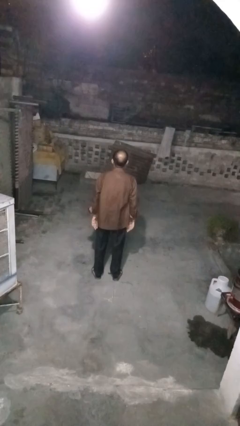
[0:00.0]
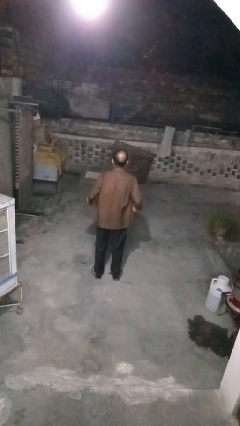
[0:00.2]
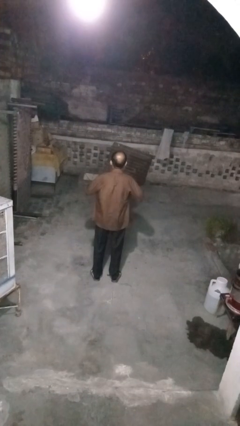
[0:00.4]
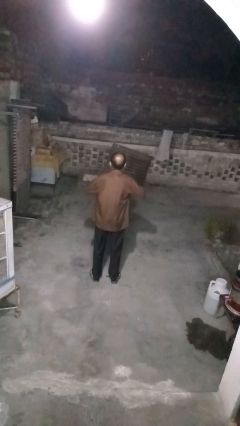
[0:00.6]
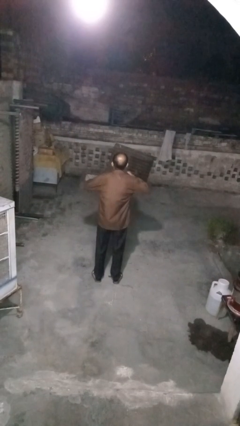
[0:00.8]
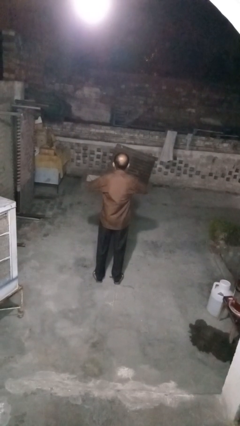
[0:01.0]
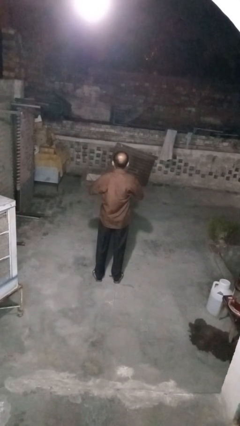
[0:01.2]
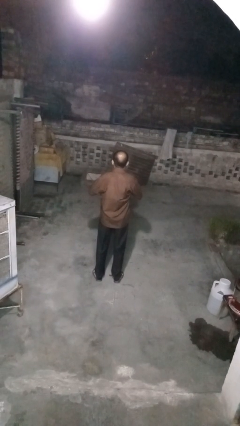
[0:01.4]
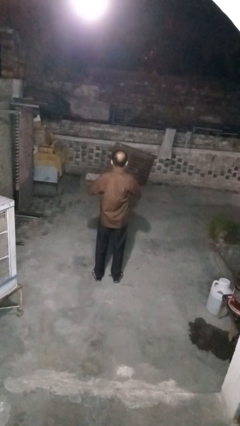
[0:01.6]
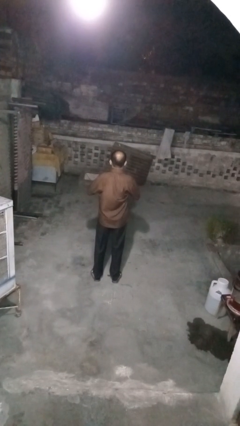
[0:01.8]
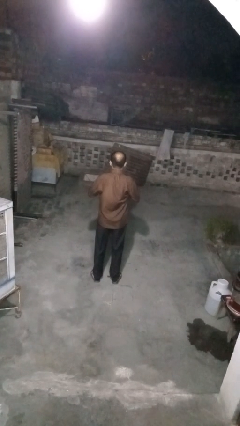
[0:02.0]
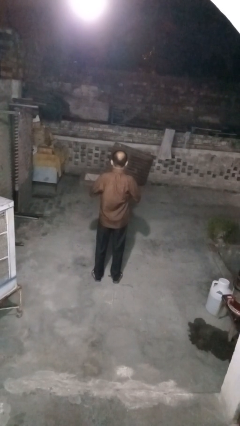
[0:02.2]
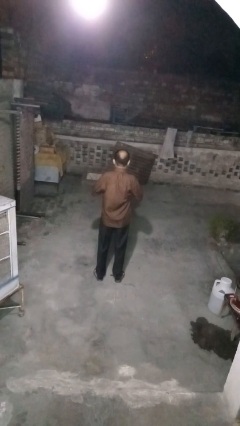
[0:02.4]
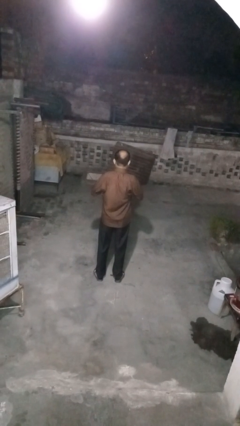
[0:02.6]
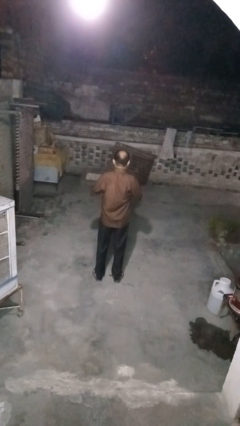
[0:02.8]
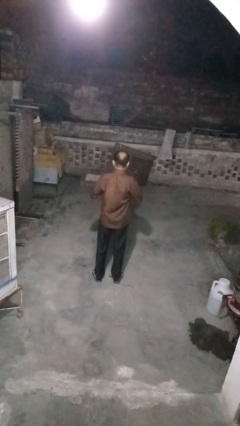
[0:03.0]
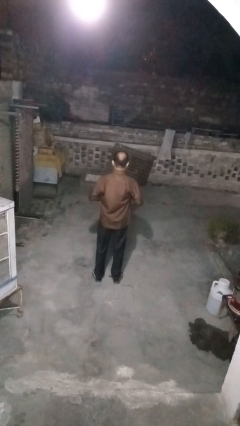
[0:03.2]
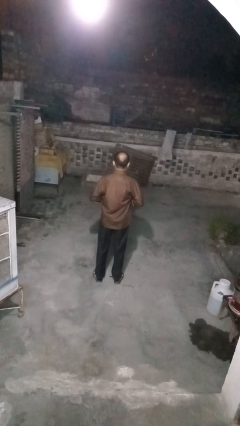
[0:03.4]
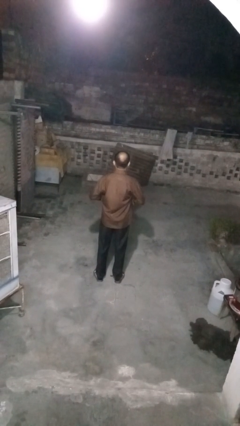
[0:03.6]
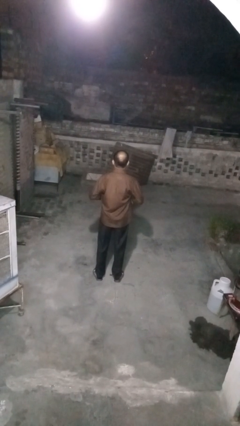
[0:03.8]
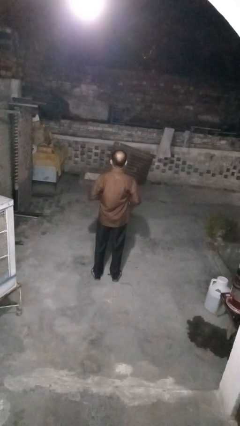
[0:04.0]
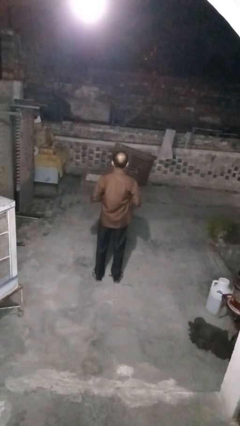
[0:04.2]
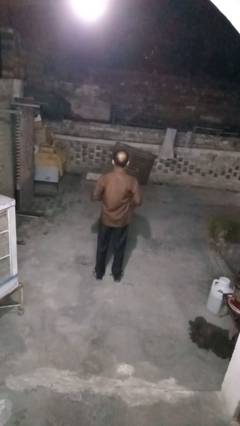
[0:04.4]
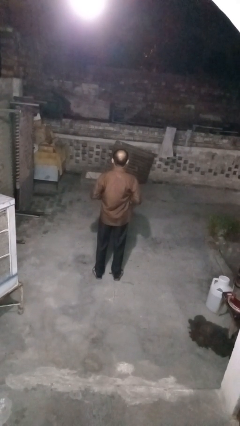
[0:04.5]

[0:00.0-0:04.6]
person buttons shirt

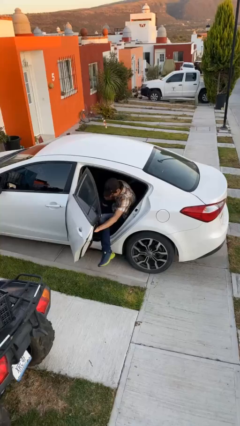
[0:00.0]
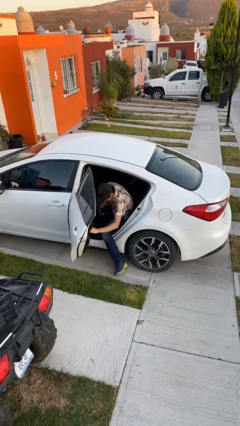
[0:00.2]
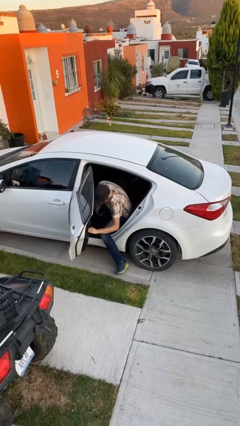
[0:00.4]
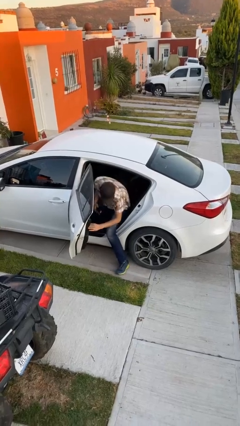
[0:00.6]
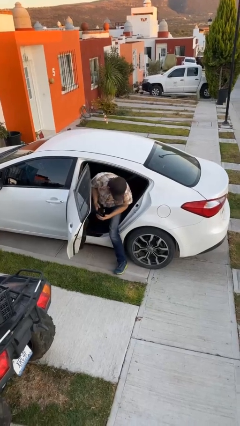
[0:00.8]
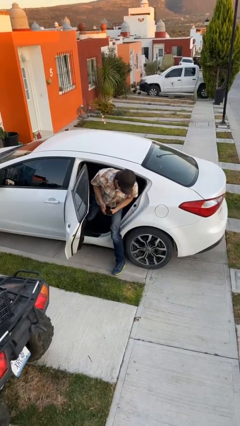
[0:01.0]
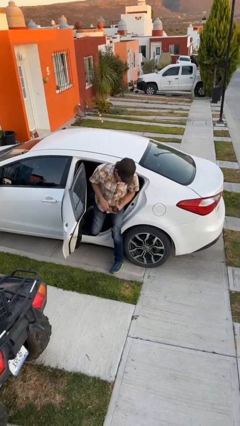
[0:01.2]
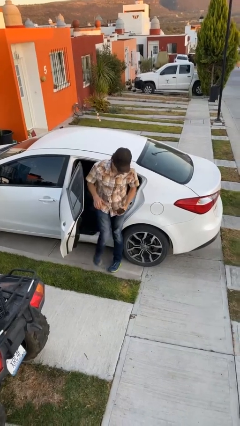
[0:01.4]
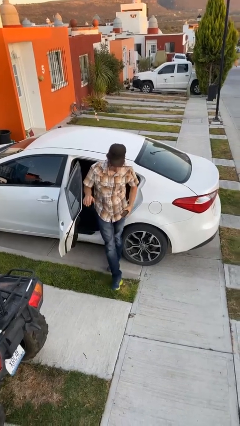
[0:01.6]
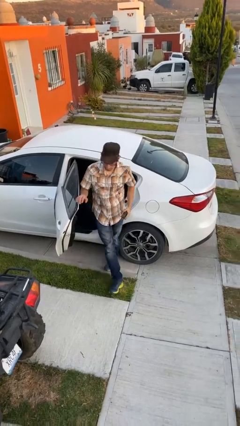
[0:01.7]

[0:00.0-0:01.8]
person exits car

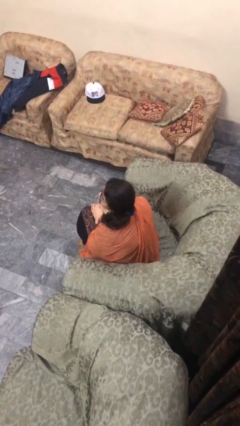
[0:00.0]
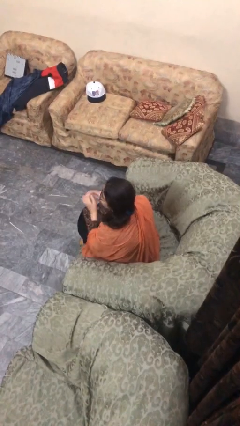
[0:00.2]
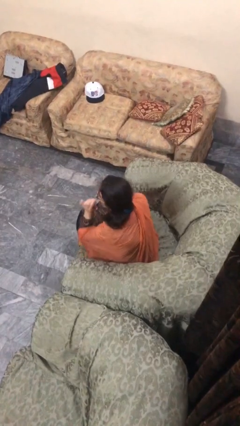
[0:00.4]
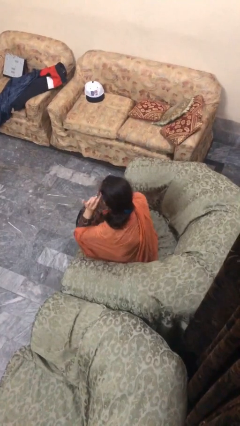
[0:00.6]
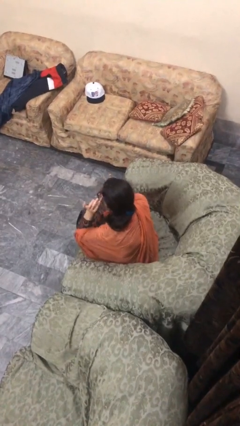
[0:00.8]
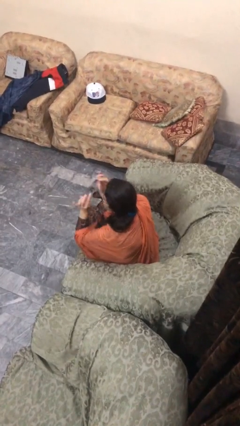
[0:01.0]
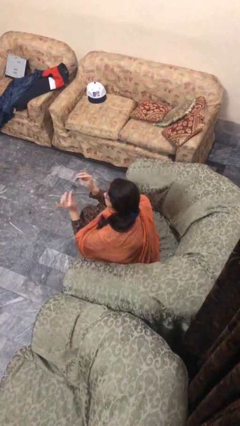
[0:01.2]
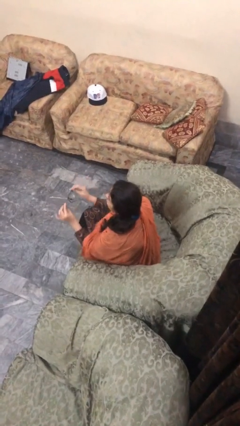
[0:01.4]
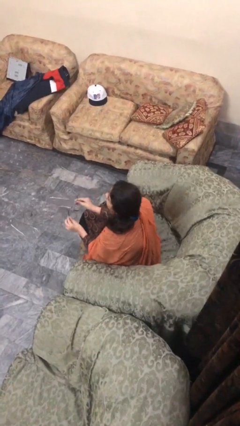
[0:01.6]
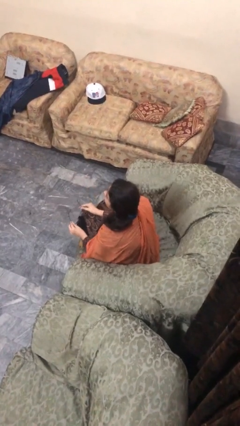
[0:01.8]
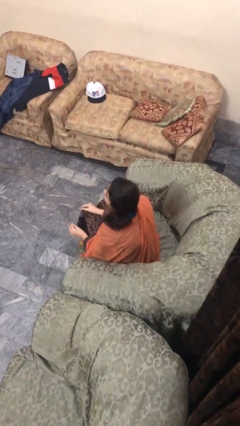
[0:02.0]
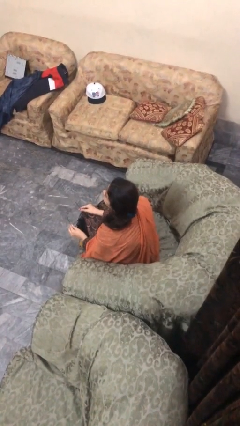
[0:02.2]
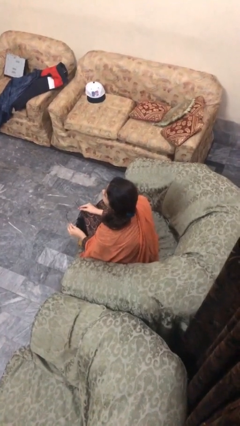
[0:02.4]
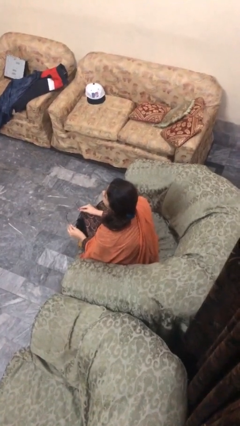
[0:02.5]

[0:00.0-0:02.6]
person takes off glasses

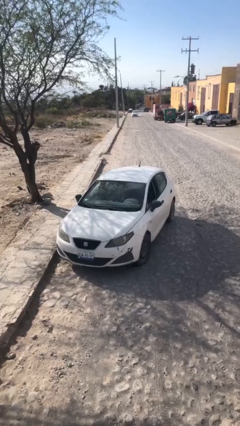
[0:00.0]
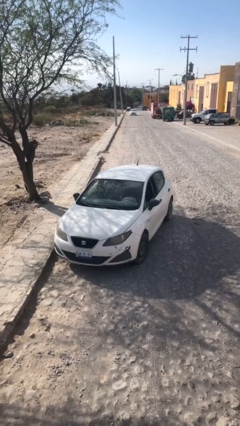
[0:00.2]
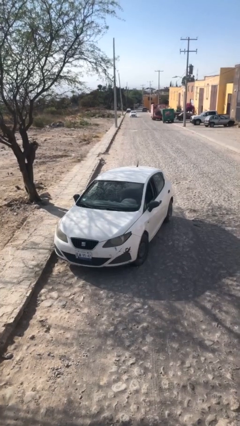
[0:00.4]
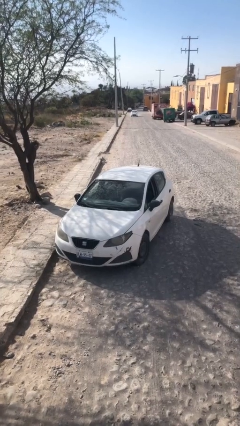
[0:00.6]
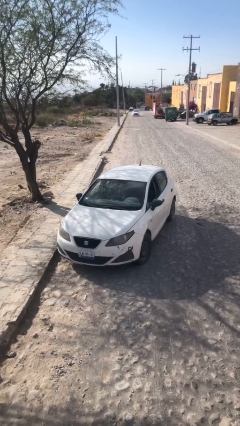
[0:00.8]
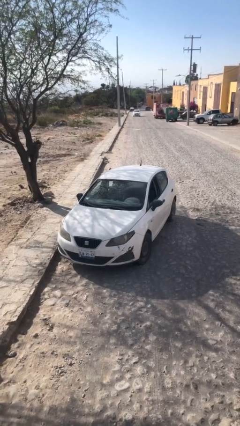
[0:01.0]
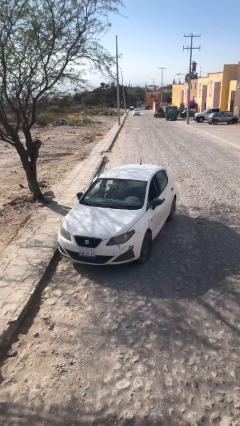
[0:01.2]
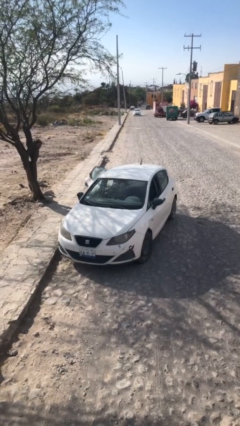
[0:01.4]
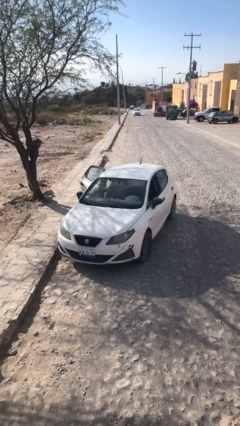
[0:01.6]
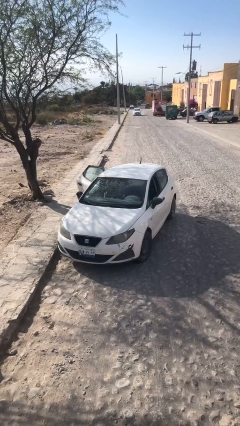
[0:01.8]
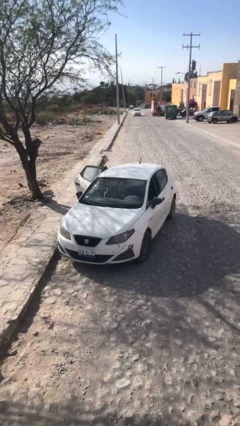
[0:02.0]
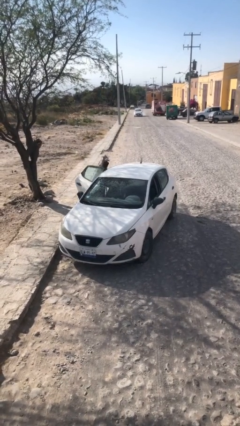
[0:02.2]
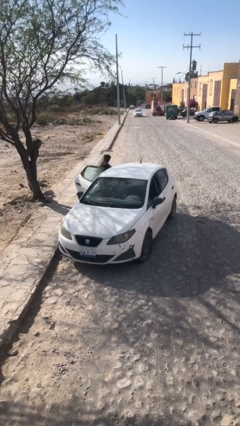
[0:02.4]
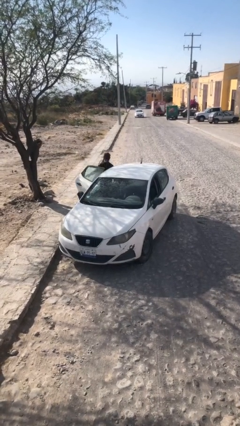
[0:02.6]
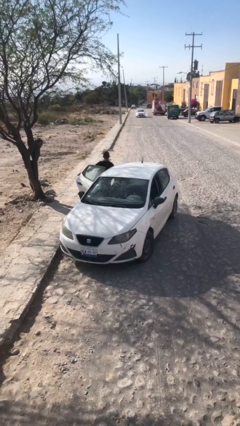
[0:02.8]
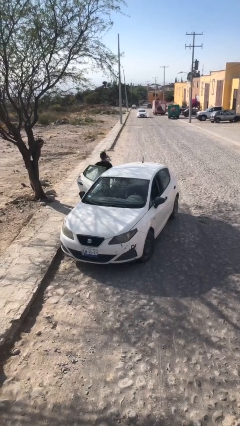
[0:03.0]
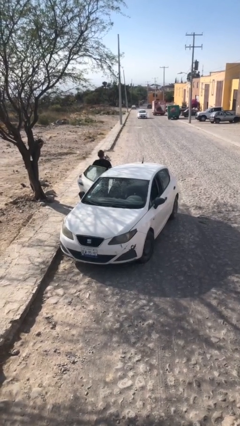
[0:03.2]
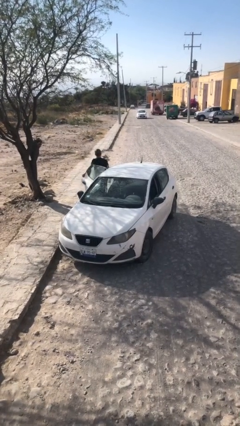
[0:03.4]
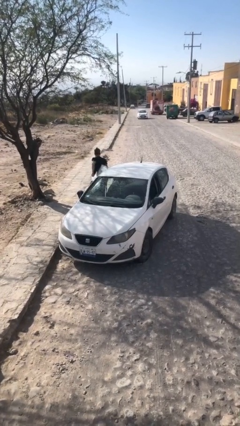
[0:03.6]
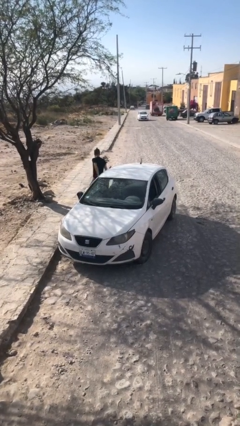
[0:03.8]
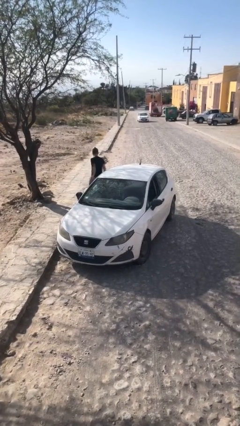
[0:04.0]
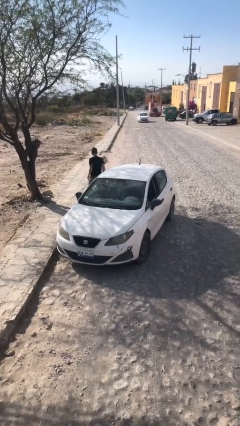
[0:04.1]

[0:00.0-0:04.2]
car drops off person

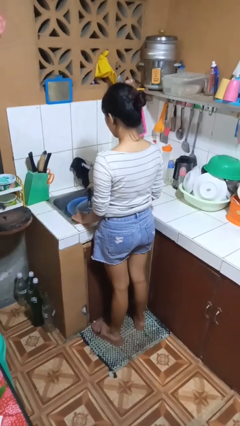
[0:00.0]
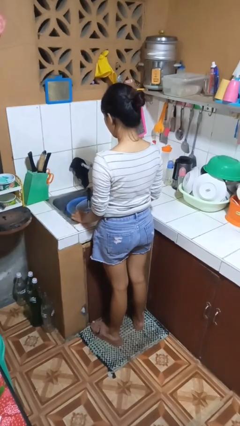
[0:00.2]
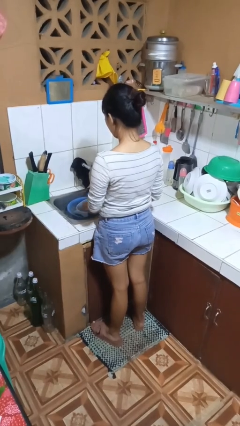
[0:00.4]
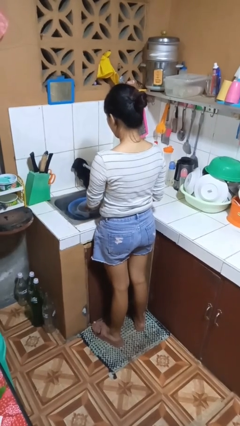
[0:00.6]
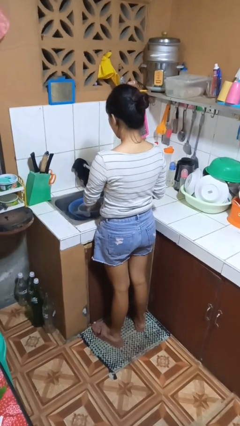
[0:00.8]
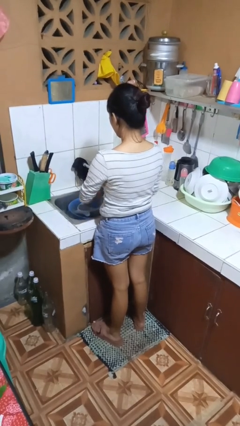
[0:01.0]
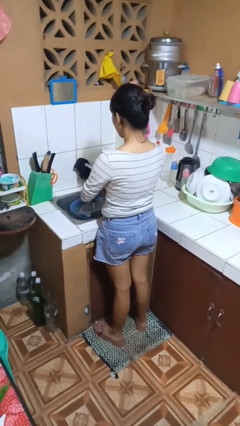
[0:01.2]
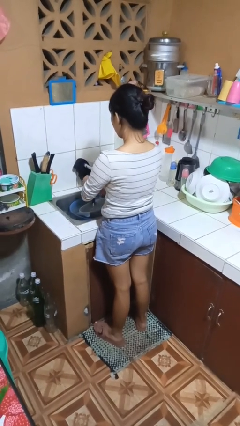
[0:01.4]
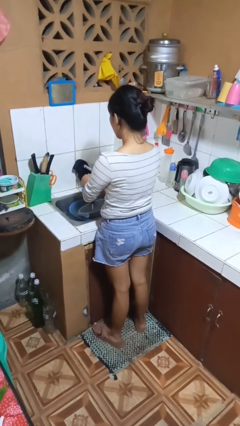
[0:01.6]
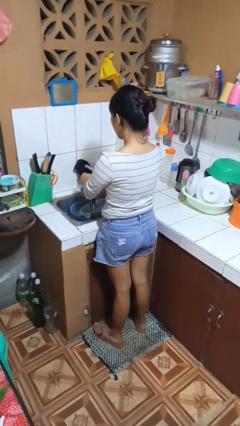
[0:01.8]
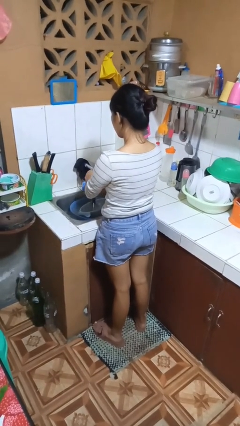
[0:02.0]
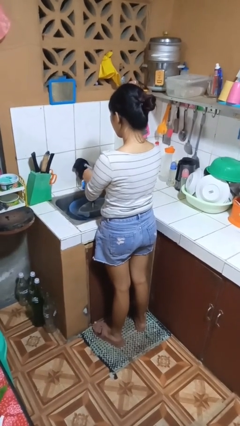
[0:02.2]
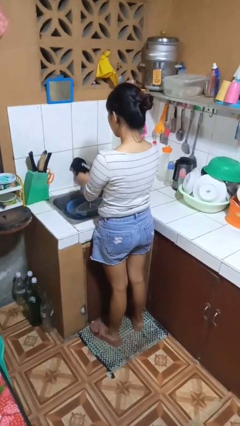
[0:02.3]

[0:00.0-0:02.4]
person washes dish

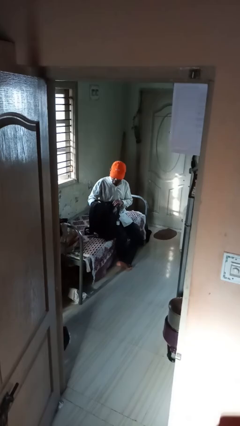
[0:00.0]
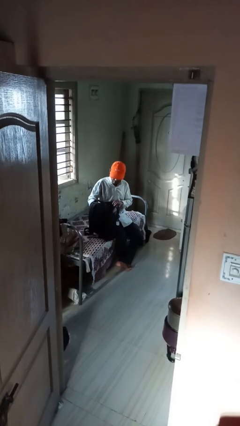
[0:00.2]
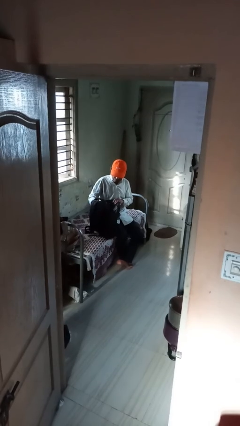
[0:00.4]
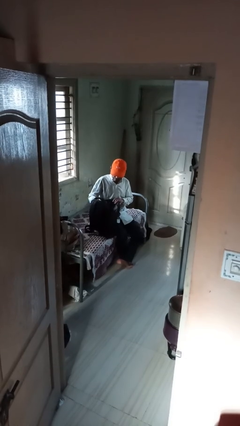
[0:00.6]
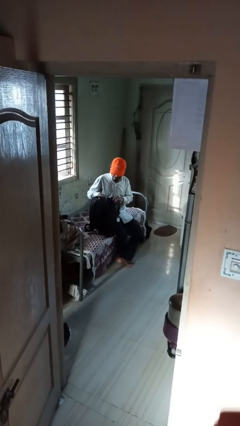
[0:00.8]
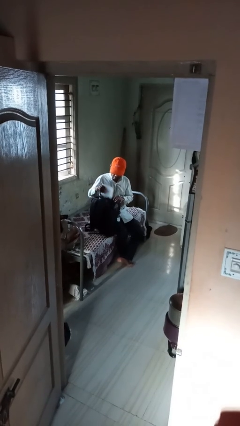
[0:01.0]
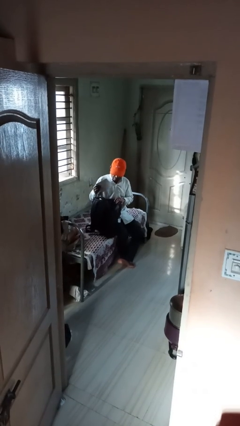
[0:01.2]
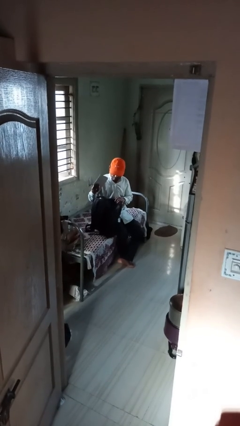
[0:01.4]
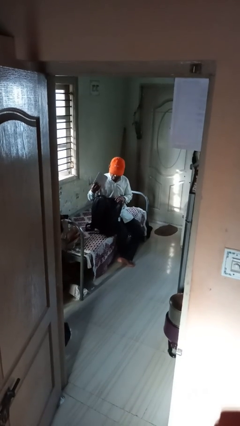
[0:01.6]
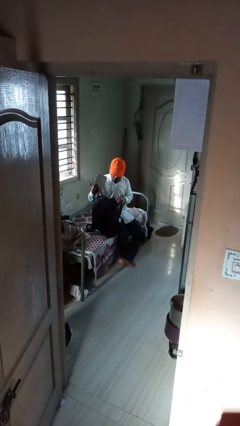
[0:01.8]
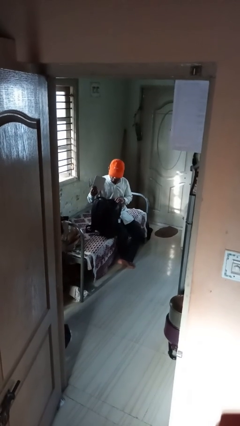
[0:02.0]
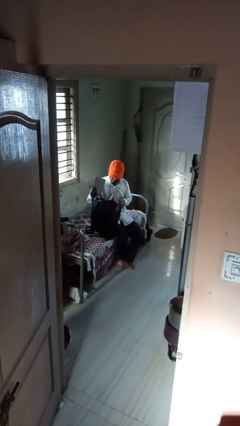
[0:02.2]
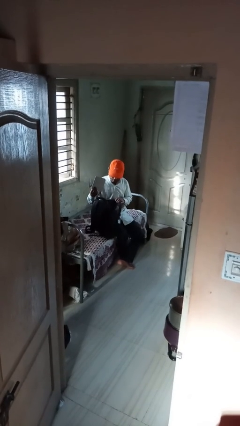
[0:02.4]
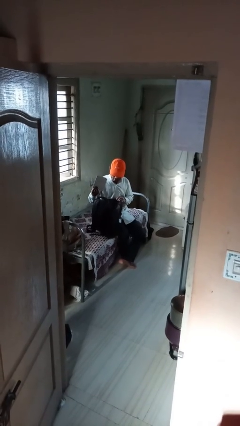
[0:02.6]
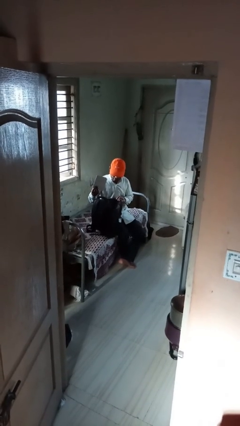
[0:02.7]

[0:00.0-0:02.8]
person takes object from backpack
